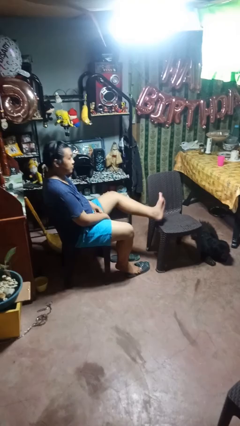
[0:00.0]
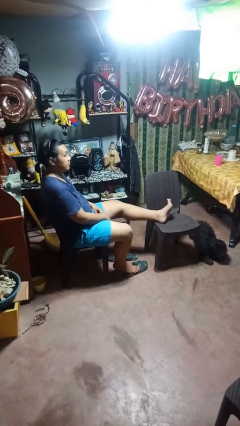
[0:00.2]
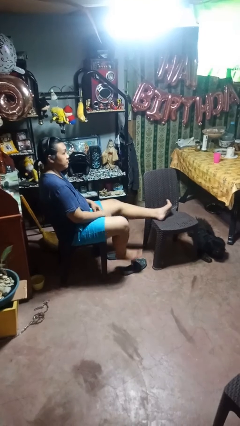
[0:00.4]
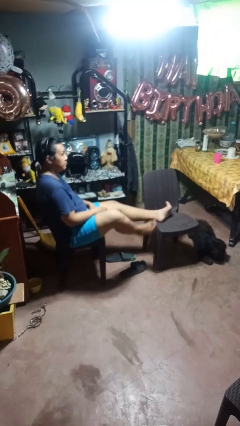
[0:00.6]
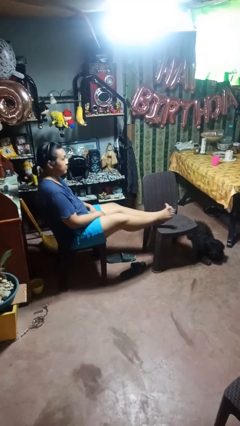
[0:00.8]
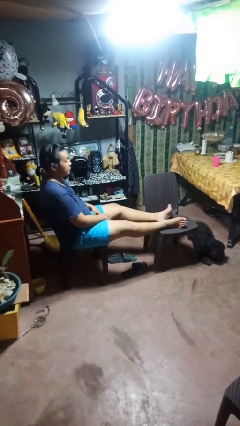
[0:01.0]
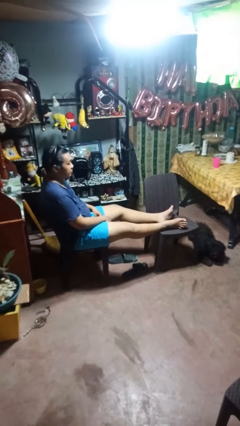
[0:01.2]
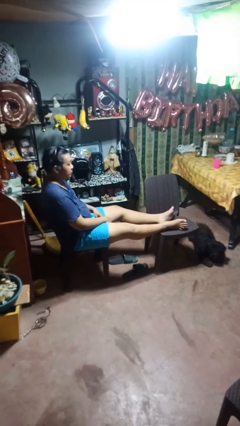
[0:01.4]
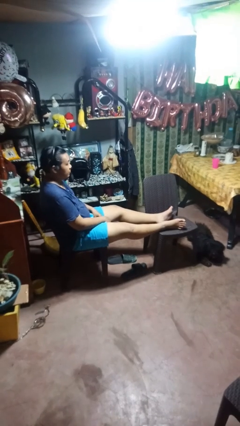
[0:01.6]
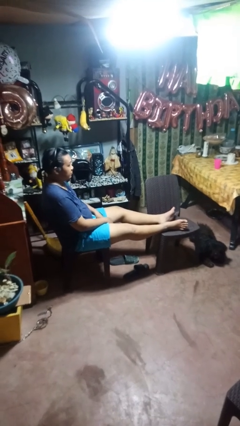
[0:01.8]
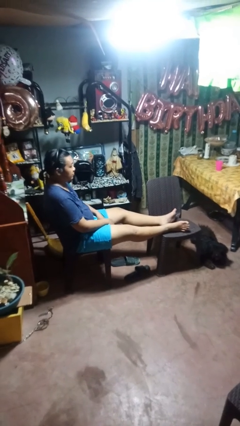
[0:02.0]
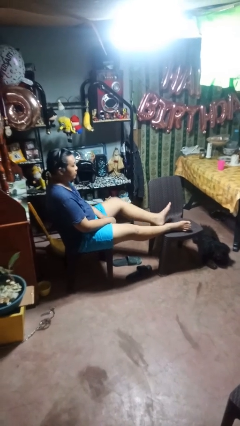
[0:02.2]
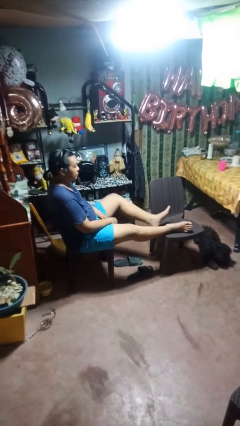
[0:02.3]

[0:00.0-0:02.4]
person puts feet up

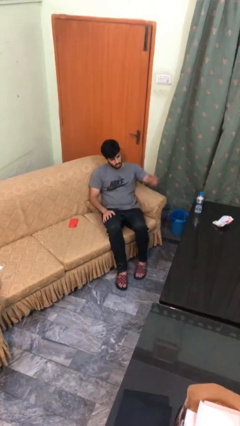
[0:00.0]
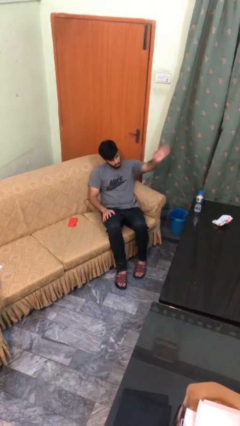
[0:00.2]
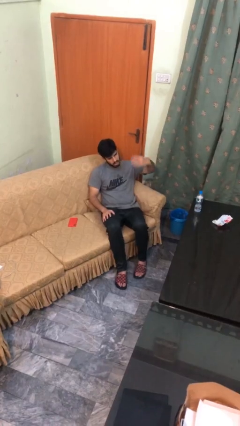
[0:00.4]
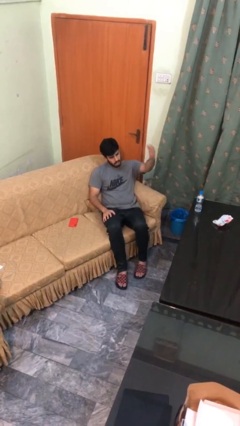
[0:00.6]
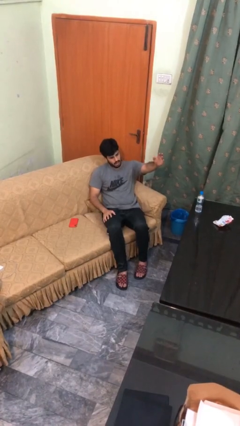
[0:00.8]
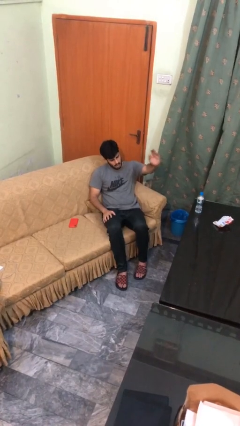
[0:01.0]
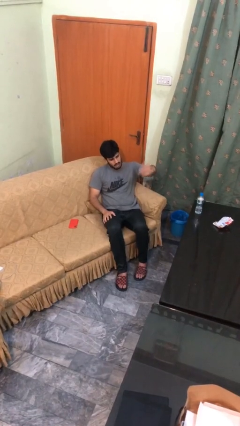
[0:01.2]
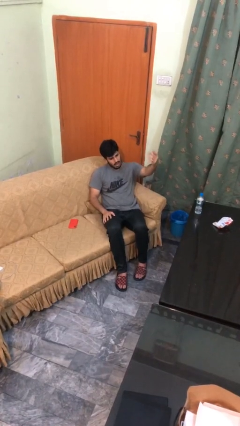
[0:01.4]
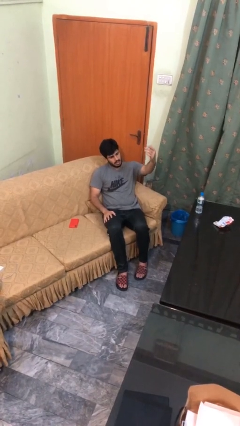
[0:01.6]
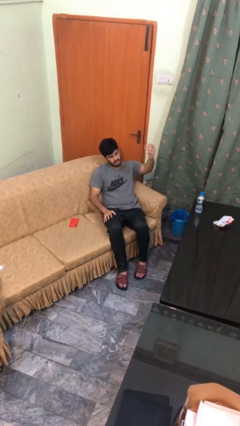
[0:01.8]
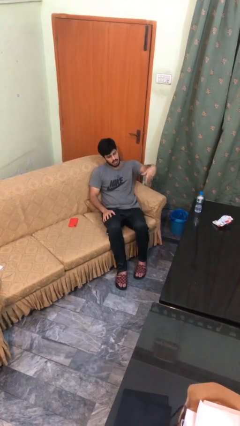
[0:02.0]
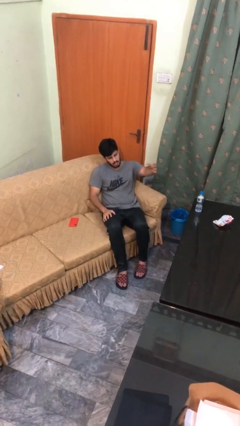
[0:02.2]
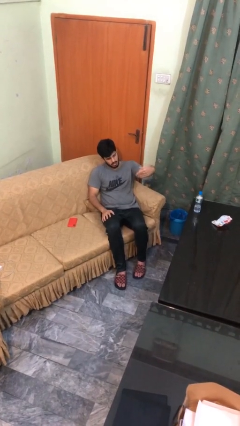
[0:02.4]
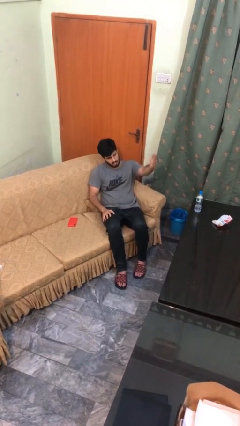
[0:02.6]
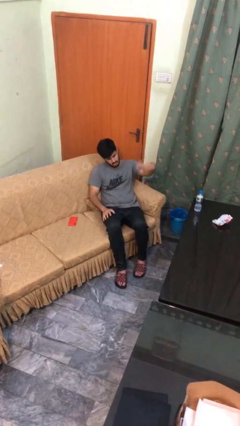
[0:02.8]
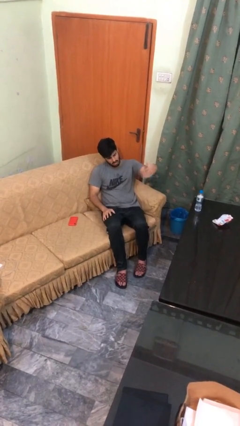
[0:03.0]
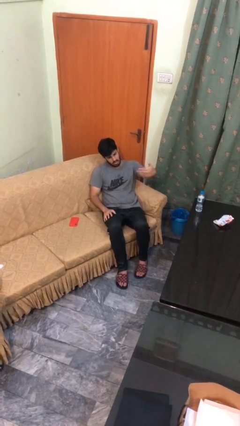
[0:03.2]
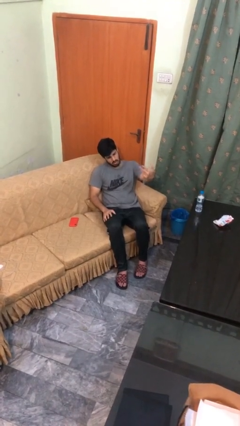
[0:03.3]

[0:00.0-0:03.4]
person gestures come here

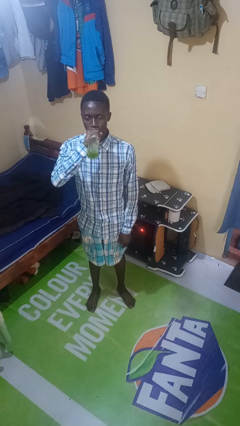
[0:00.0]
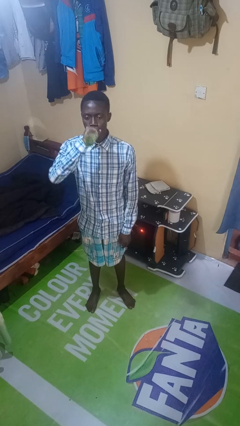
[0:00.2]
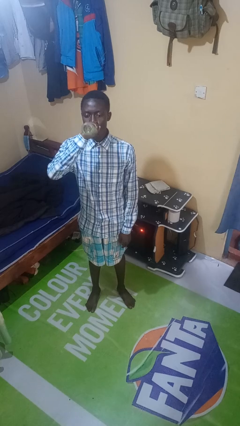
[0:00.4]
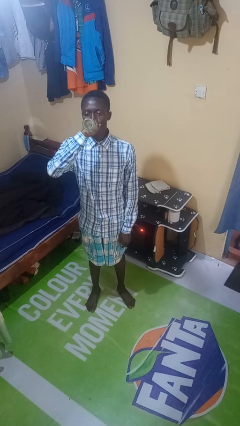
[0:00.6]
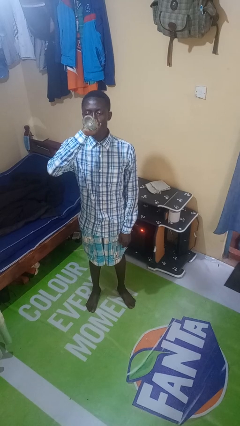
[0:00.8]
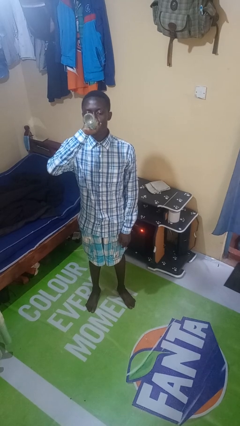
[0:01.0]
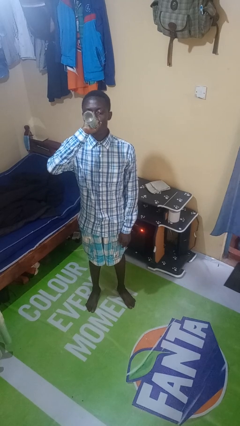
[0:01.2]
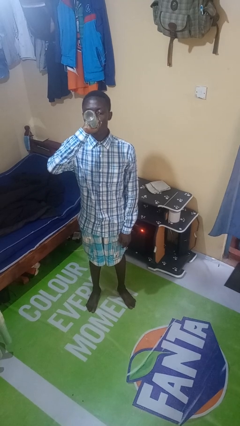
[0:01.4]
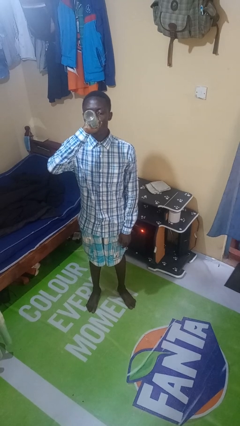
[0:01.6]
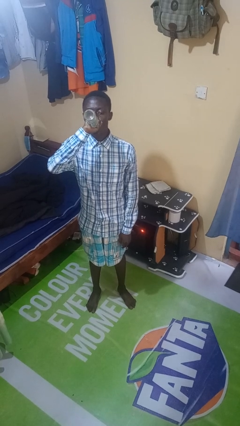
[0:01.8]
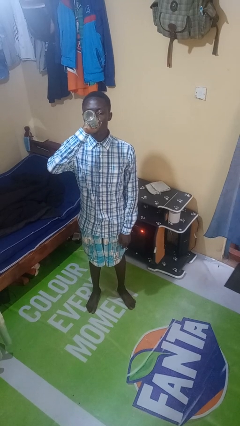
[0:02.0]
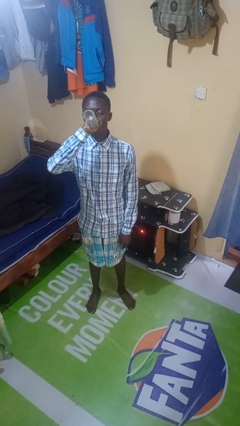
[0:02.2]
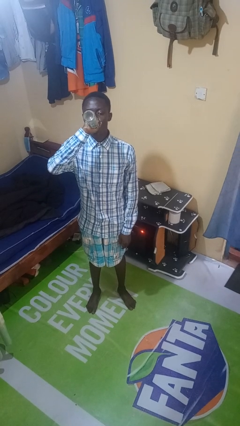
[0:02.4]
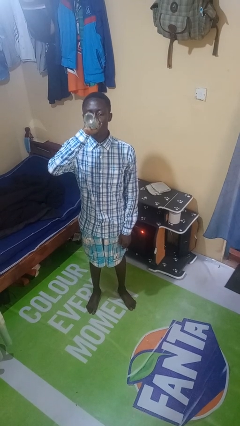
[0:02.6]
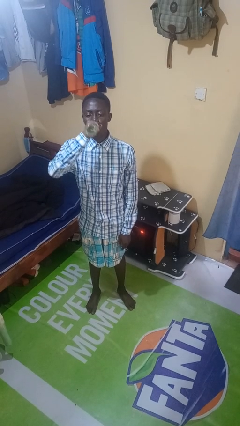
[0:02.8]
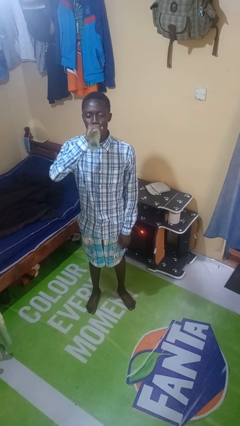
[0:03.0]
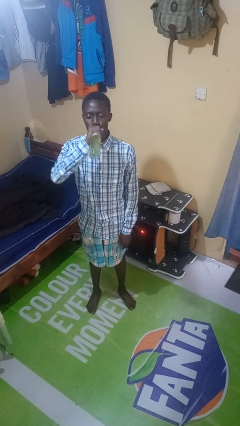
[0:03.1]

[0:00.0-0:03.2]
person drinks from bottle

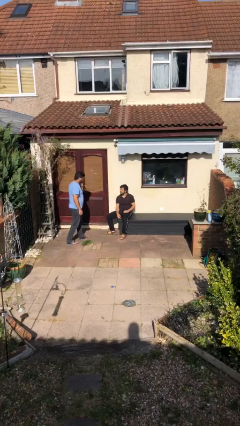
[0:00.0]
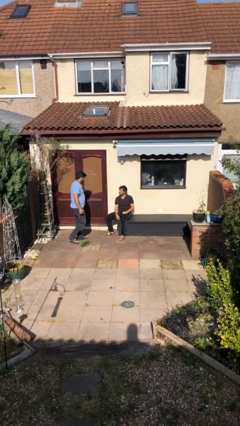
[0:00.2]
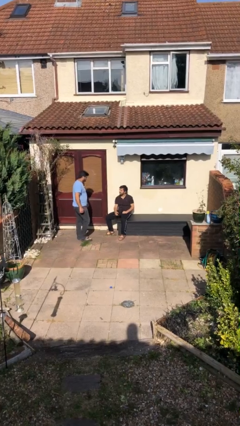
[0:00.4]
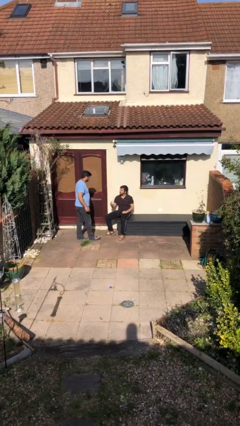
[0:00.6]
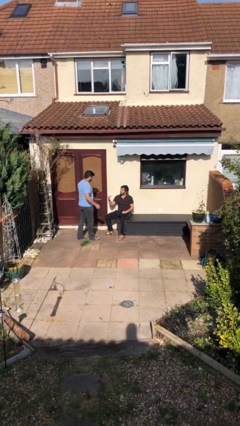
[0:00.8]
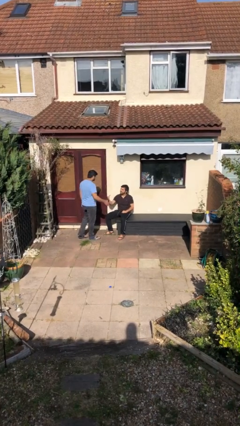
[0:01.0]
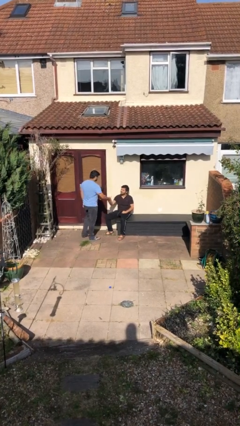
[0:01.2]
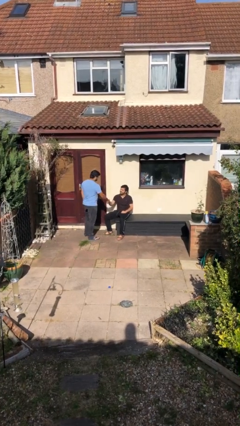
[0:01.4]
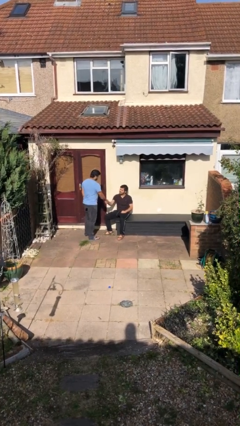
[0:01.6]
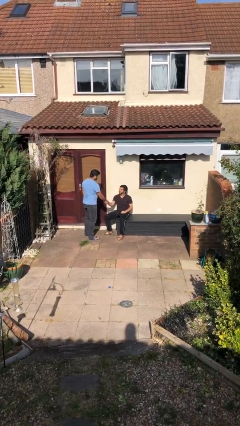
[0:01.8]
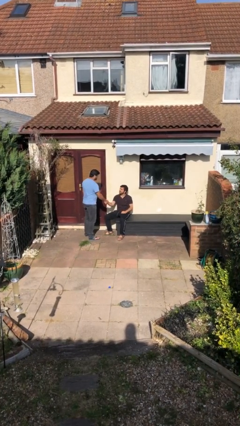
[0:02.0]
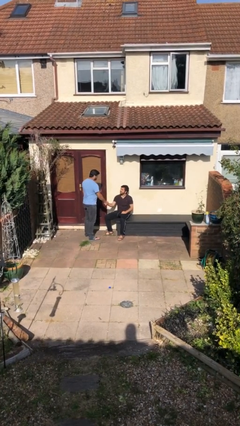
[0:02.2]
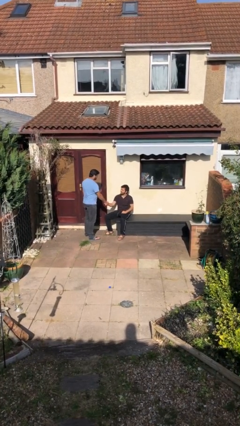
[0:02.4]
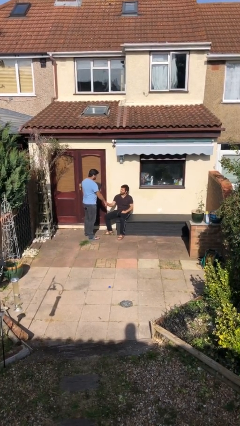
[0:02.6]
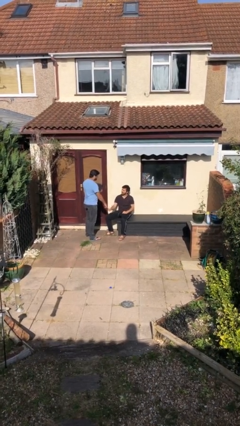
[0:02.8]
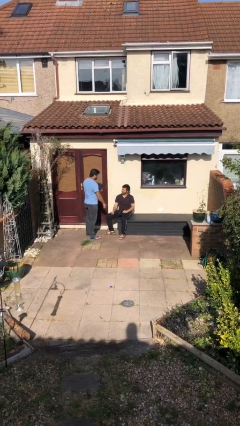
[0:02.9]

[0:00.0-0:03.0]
person shakes hand

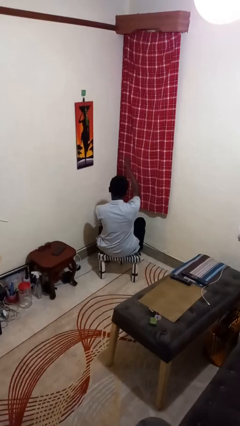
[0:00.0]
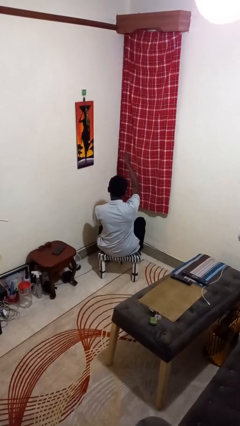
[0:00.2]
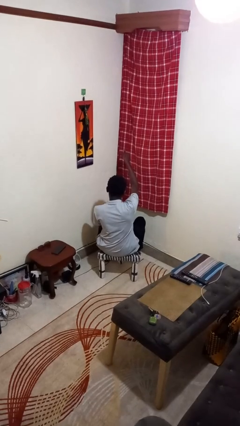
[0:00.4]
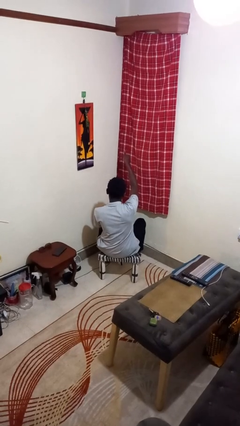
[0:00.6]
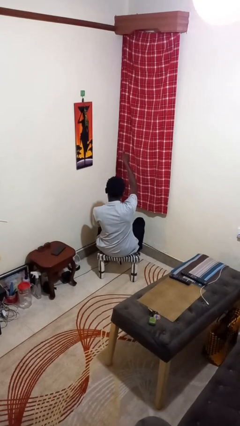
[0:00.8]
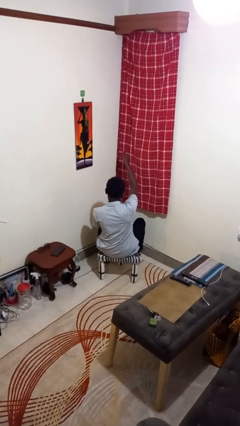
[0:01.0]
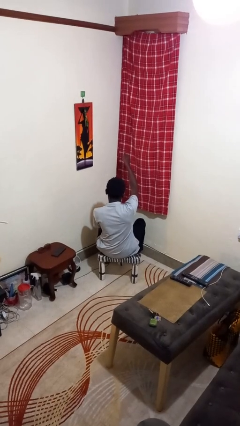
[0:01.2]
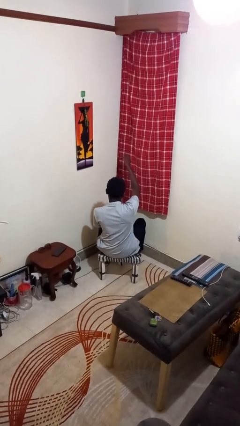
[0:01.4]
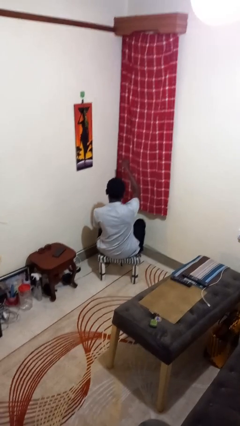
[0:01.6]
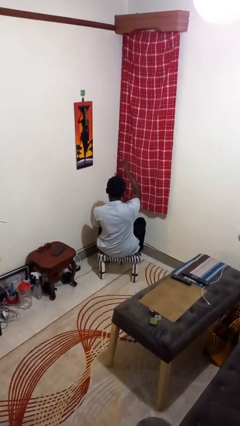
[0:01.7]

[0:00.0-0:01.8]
person gestures thumbs up

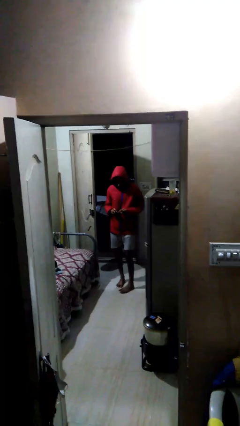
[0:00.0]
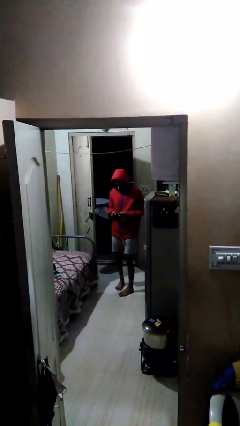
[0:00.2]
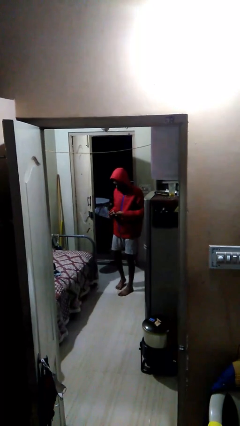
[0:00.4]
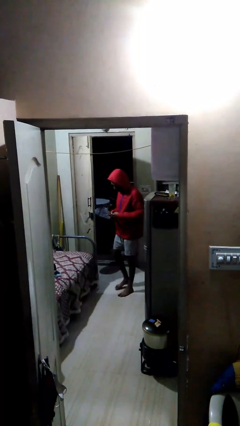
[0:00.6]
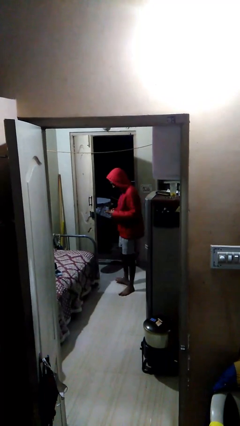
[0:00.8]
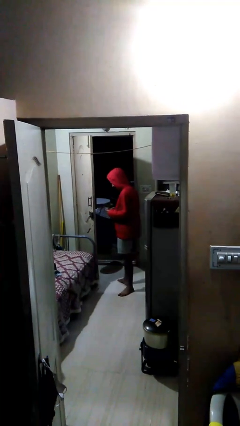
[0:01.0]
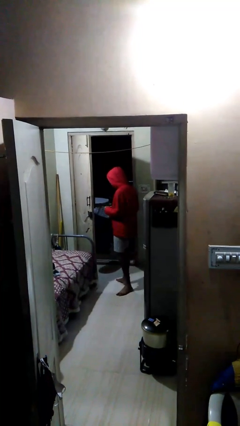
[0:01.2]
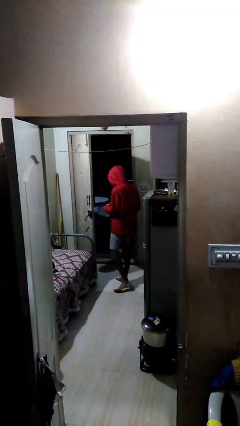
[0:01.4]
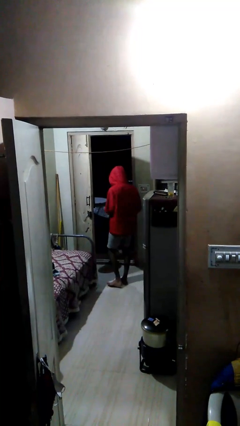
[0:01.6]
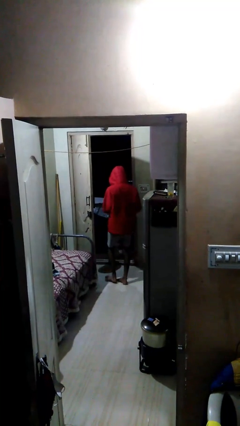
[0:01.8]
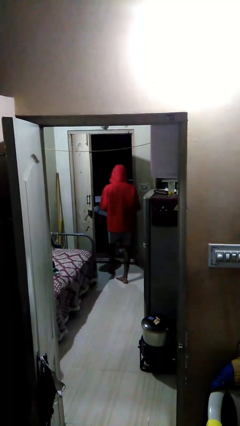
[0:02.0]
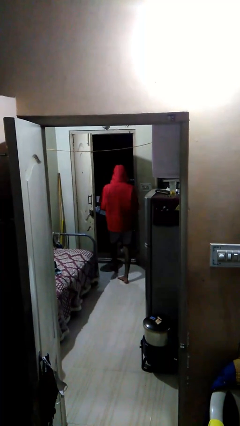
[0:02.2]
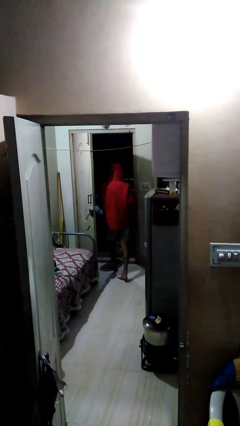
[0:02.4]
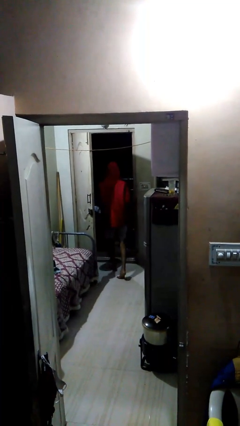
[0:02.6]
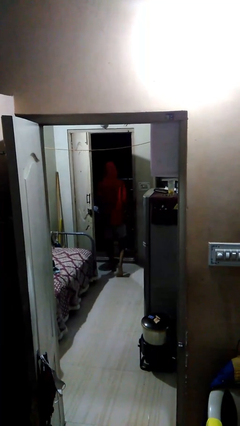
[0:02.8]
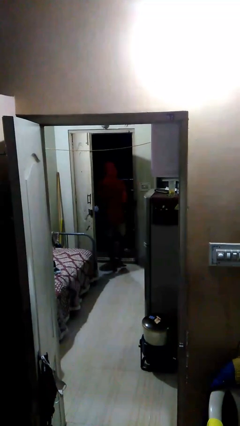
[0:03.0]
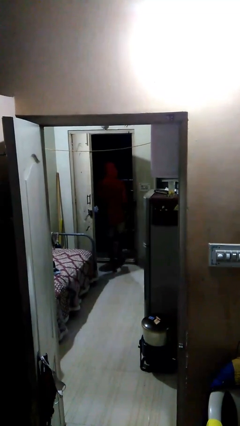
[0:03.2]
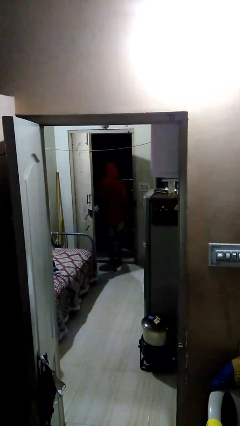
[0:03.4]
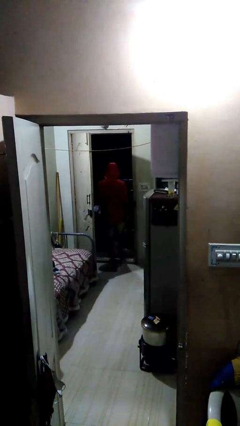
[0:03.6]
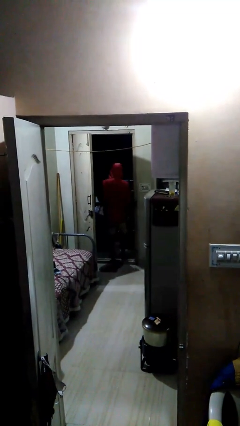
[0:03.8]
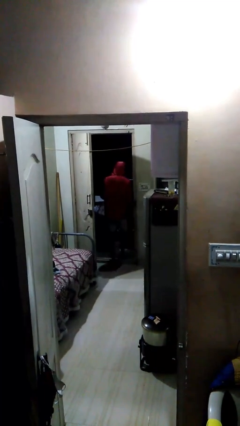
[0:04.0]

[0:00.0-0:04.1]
person exits scene through structure
